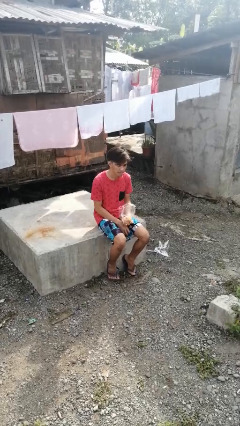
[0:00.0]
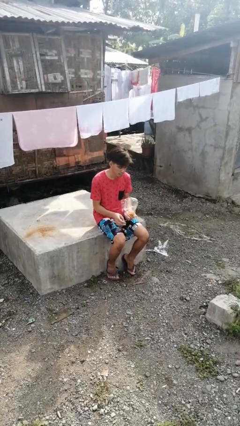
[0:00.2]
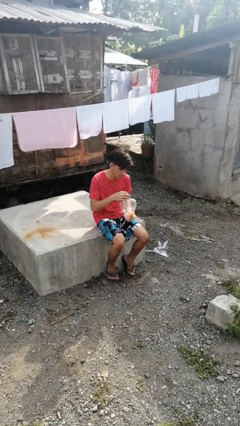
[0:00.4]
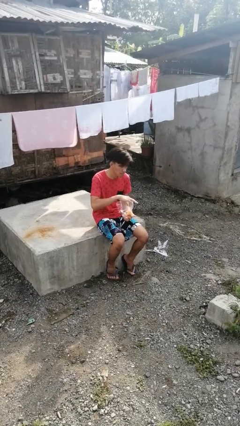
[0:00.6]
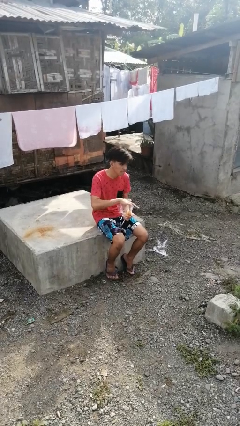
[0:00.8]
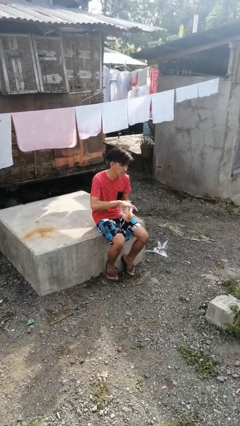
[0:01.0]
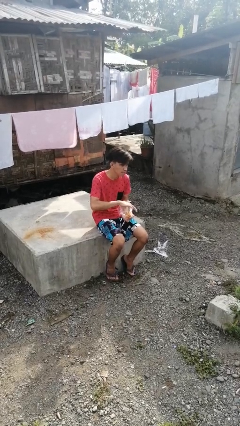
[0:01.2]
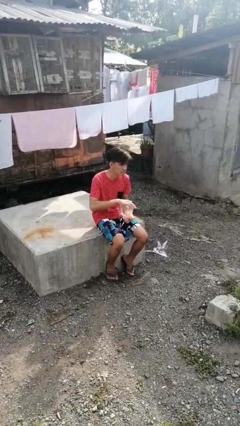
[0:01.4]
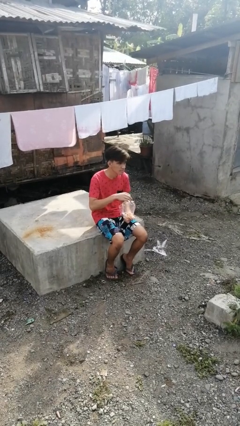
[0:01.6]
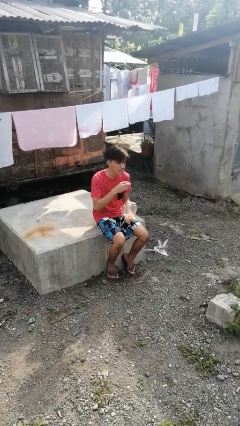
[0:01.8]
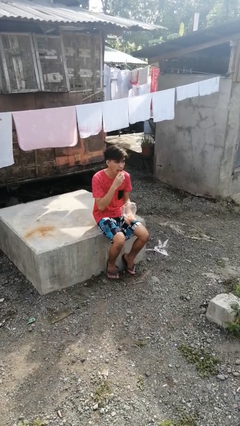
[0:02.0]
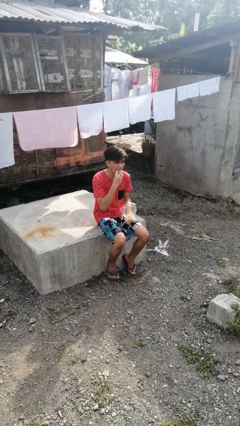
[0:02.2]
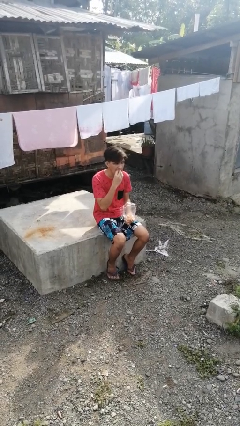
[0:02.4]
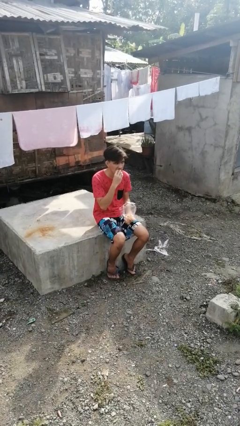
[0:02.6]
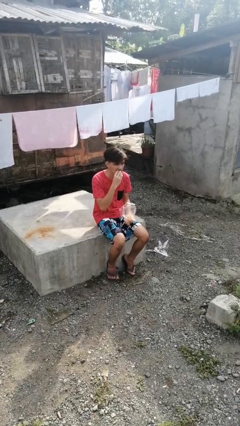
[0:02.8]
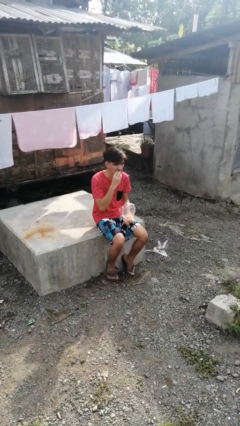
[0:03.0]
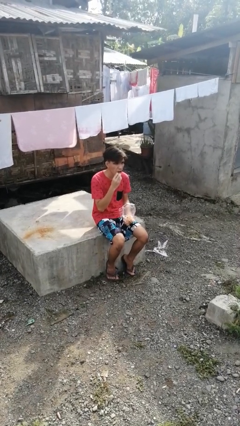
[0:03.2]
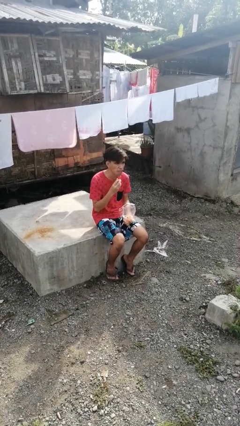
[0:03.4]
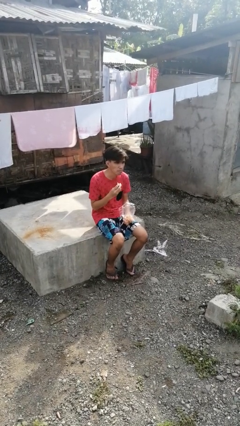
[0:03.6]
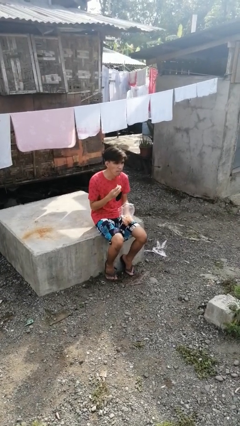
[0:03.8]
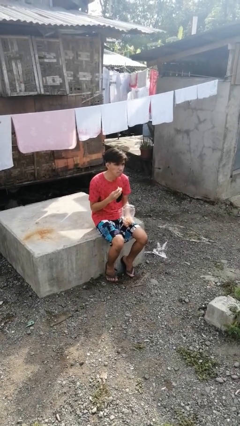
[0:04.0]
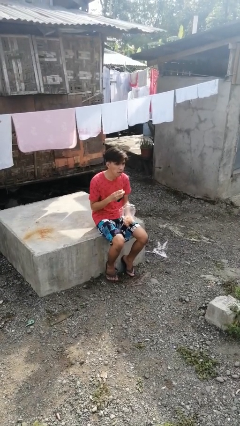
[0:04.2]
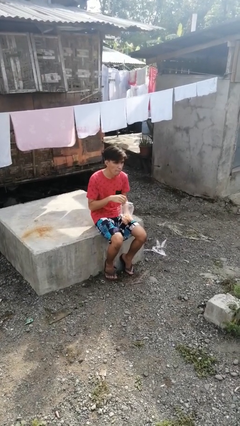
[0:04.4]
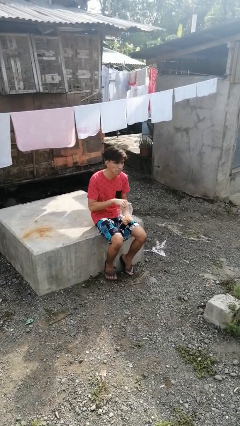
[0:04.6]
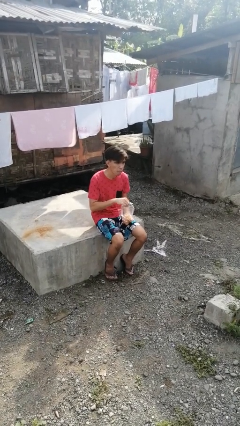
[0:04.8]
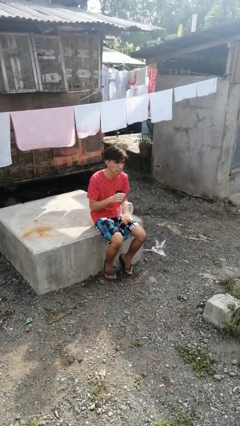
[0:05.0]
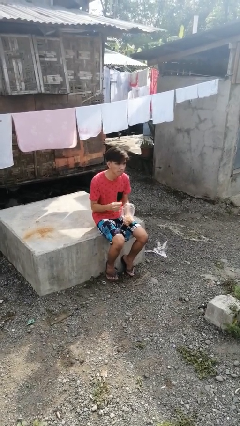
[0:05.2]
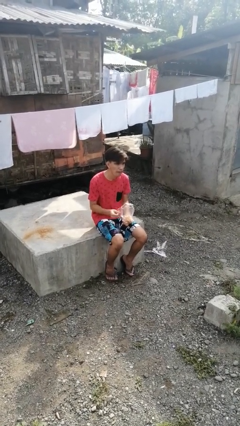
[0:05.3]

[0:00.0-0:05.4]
person eats snack from bag

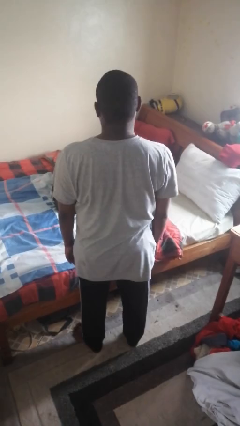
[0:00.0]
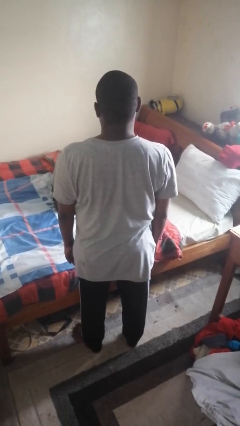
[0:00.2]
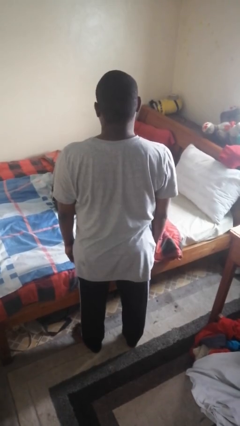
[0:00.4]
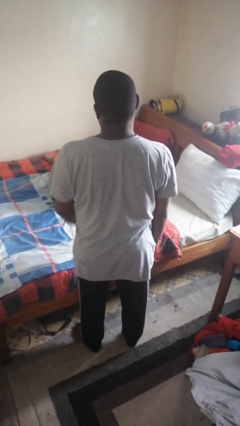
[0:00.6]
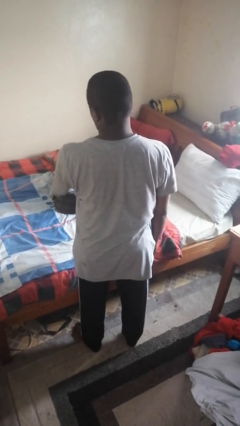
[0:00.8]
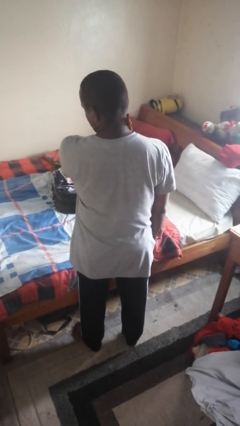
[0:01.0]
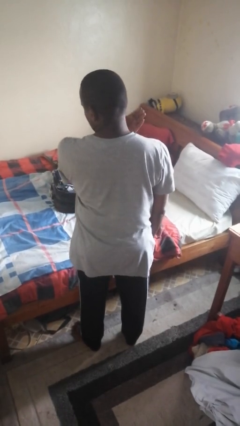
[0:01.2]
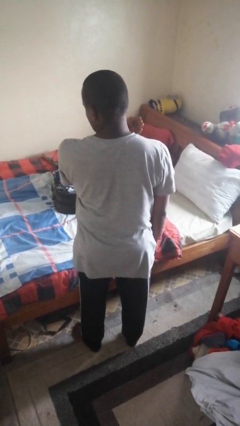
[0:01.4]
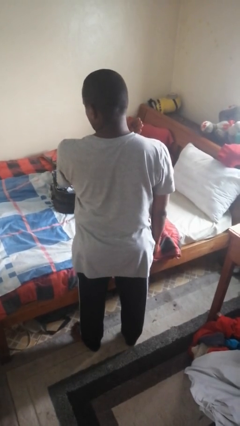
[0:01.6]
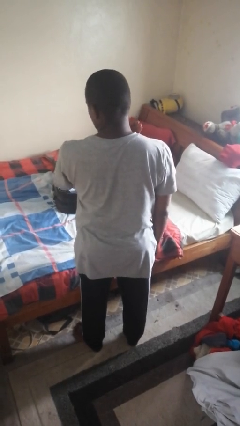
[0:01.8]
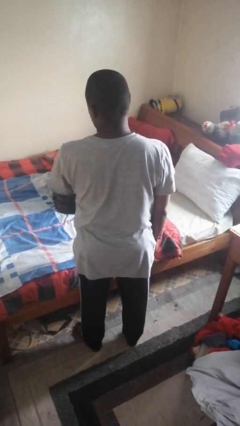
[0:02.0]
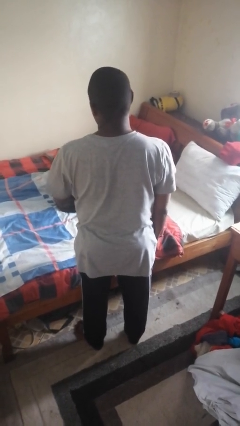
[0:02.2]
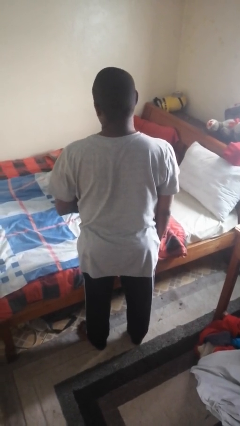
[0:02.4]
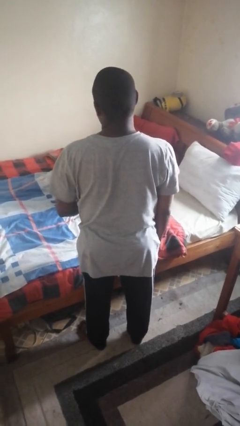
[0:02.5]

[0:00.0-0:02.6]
person swats bug

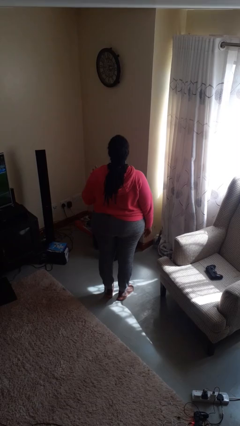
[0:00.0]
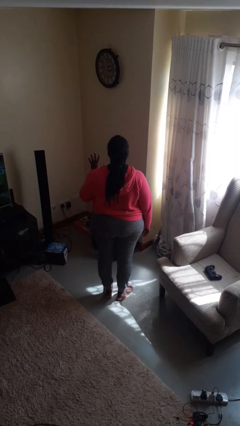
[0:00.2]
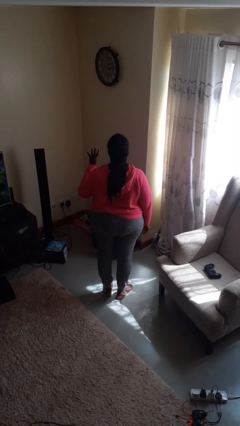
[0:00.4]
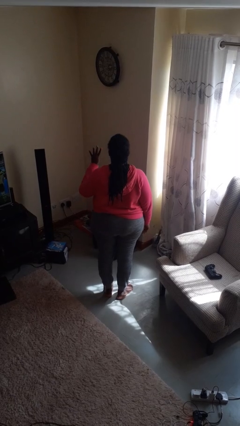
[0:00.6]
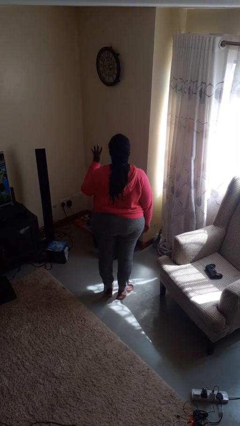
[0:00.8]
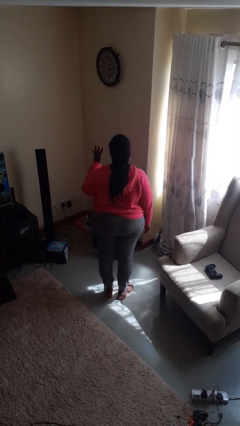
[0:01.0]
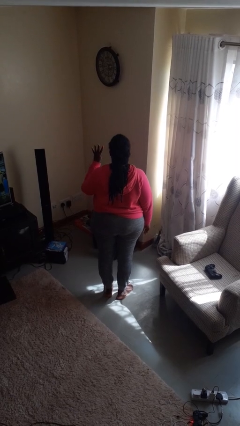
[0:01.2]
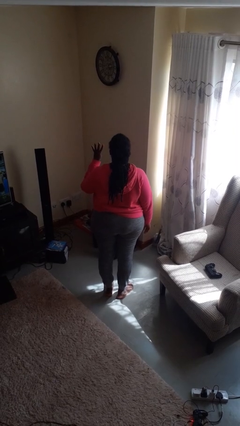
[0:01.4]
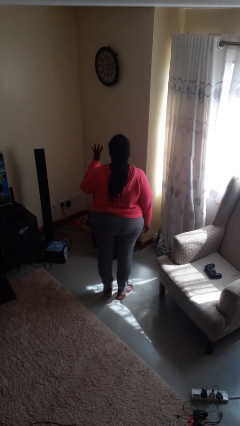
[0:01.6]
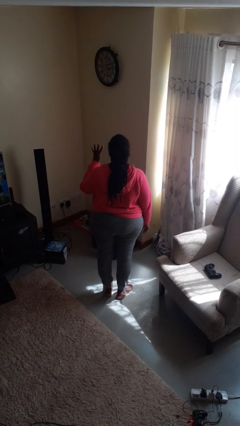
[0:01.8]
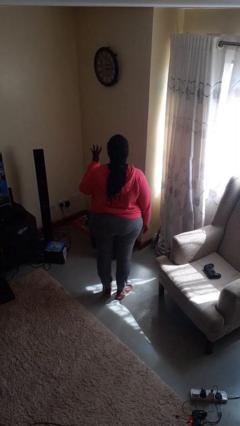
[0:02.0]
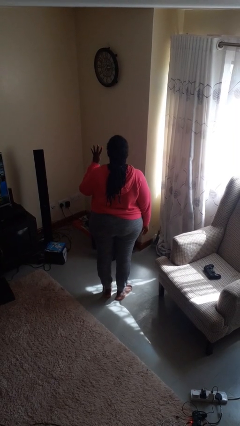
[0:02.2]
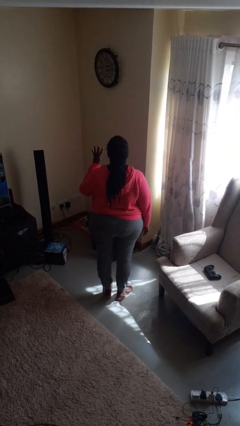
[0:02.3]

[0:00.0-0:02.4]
person gestures number four

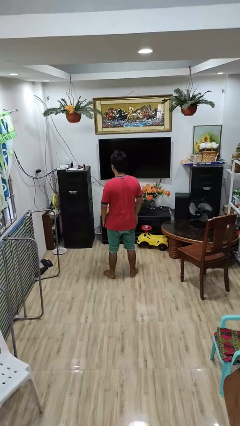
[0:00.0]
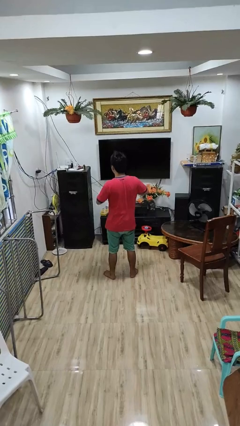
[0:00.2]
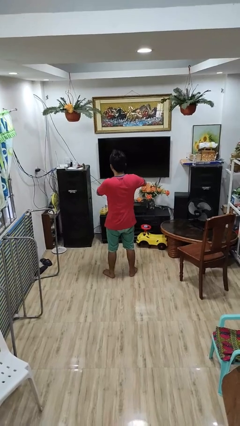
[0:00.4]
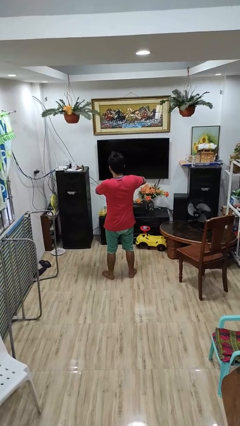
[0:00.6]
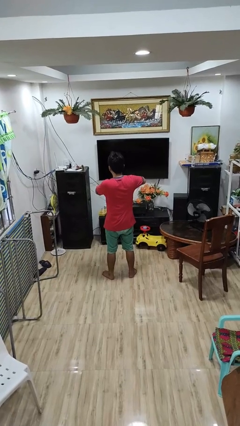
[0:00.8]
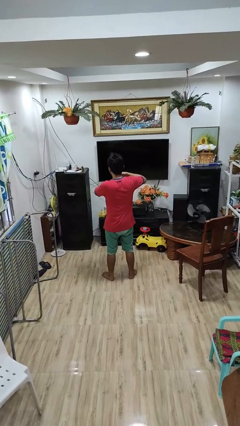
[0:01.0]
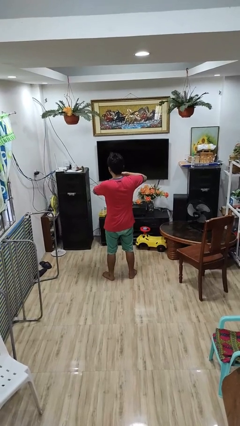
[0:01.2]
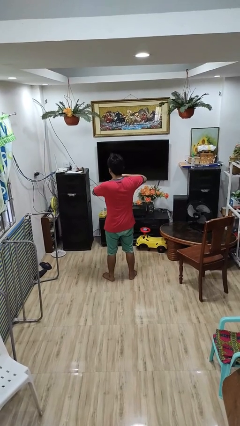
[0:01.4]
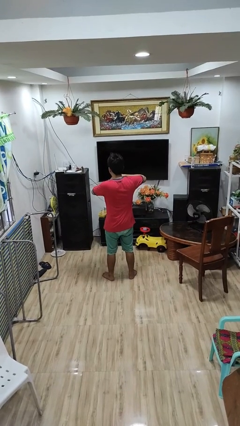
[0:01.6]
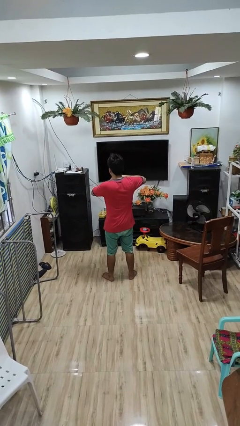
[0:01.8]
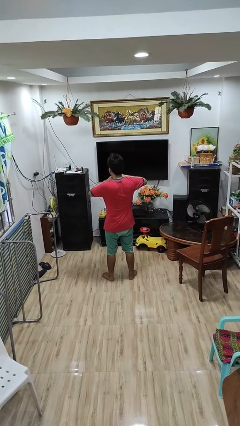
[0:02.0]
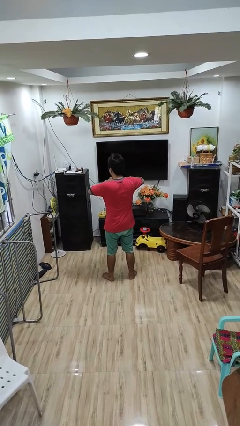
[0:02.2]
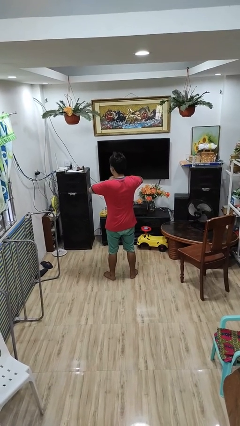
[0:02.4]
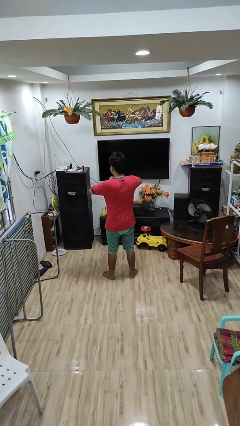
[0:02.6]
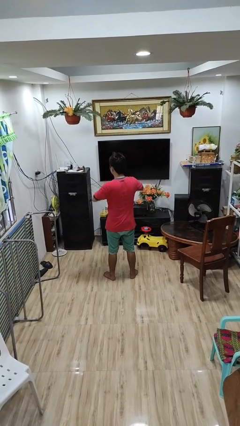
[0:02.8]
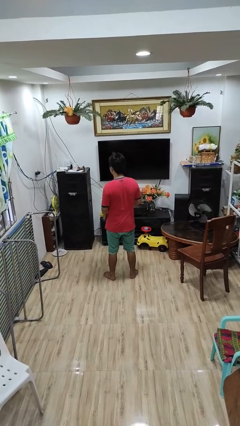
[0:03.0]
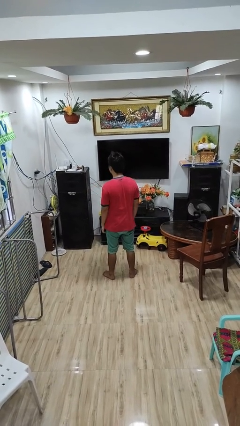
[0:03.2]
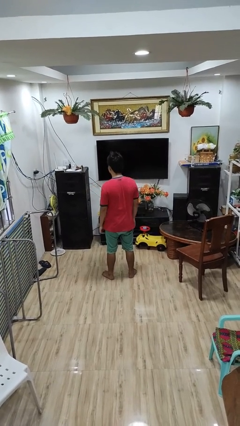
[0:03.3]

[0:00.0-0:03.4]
person cracks knuckles

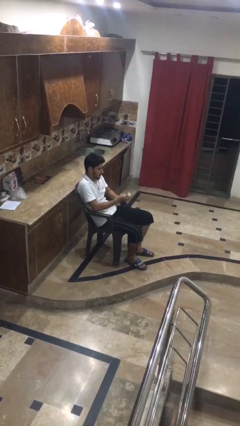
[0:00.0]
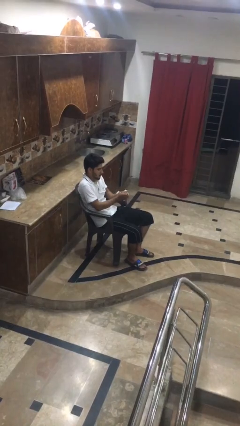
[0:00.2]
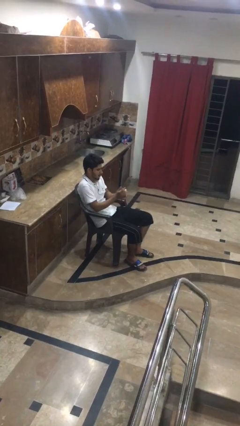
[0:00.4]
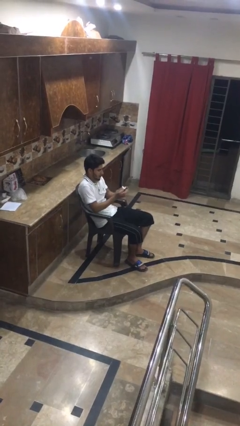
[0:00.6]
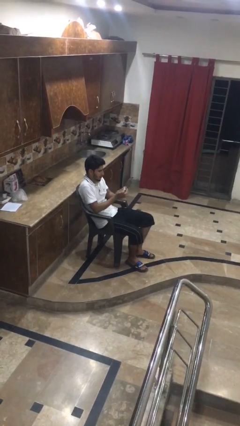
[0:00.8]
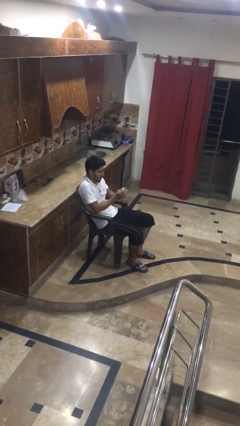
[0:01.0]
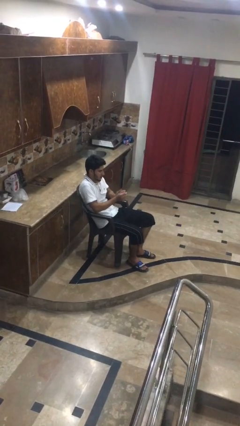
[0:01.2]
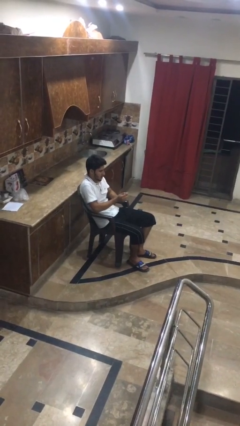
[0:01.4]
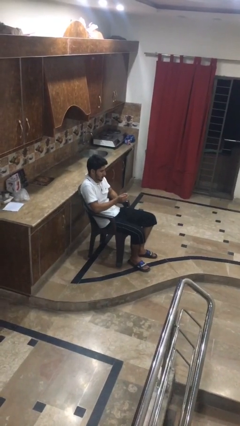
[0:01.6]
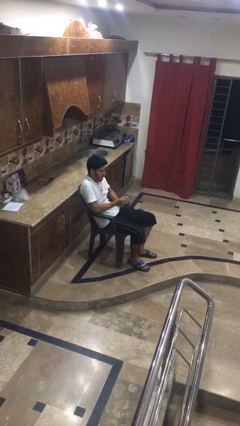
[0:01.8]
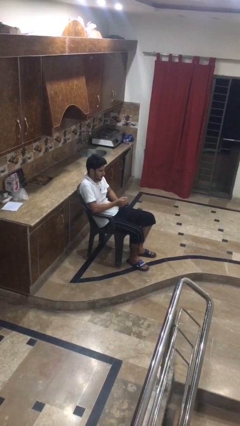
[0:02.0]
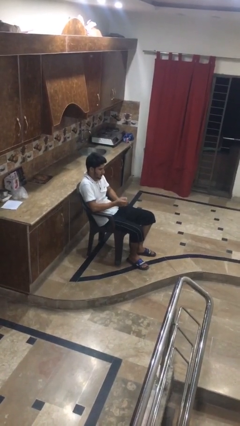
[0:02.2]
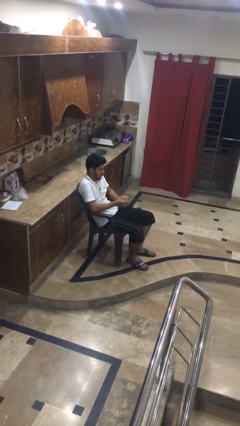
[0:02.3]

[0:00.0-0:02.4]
person crumples paper

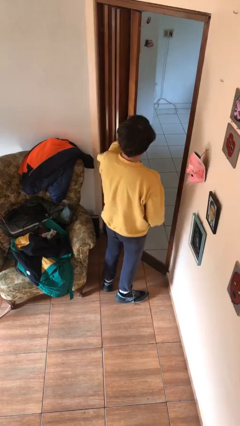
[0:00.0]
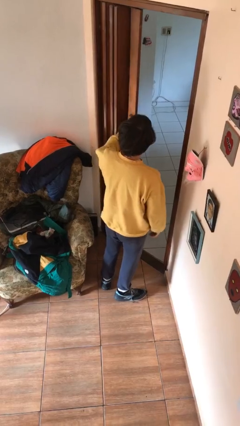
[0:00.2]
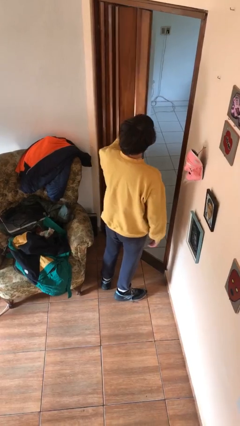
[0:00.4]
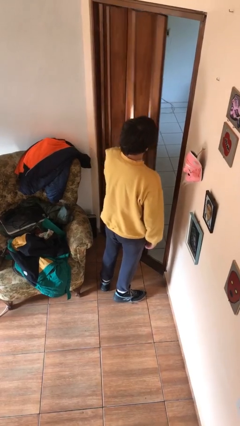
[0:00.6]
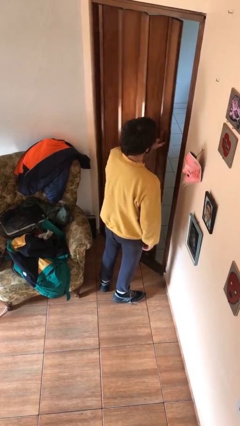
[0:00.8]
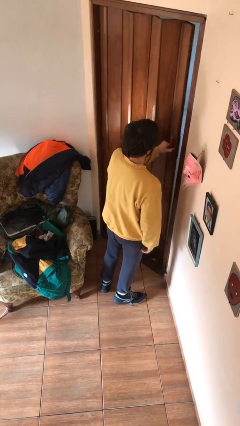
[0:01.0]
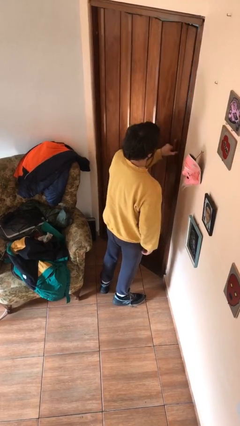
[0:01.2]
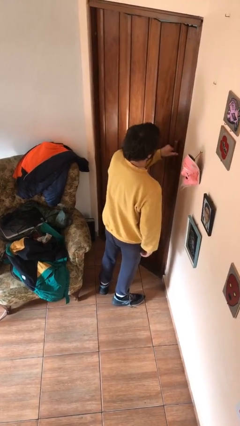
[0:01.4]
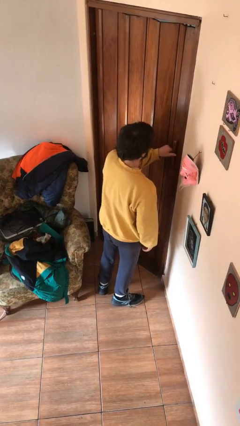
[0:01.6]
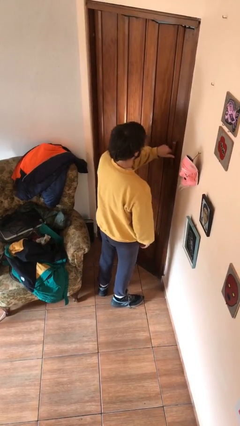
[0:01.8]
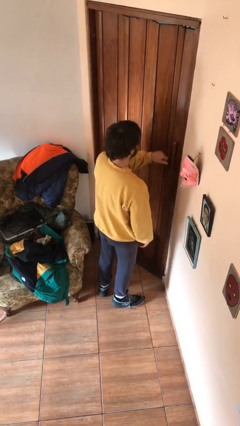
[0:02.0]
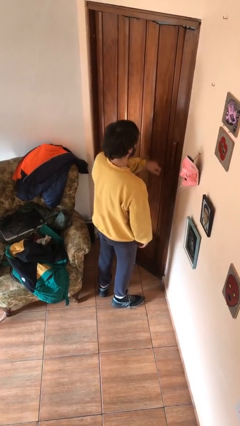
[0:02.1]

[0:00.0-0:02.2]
person closes sliding door
